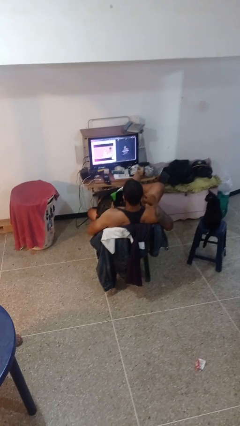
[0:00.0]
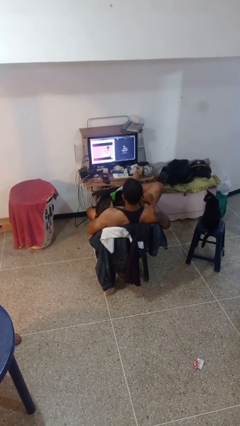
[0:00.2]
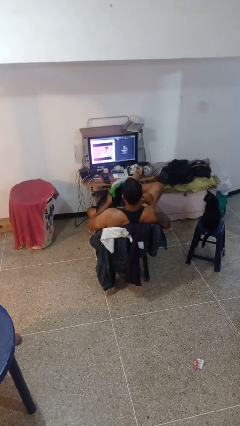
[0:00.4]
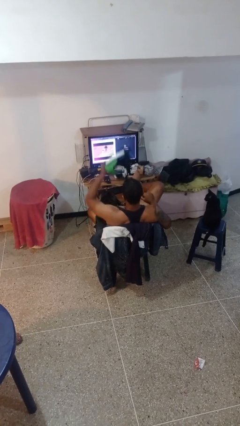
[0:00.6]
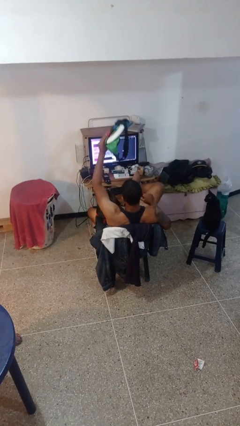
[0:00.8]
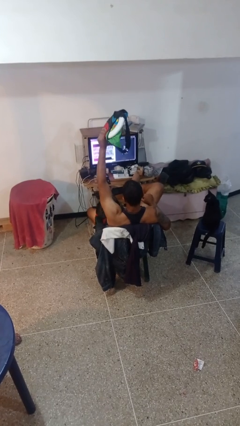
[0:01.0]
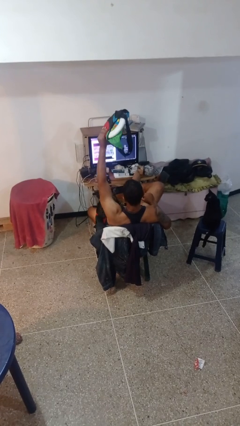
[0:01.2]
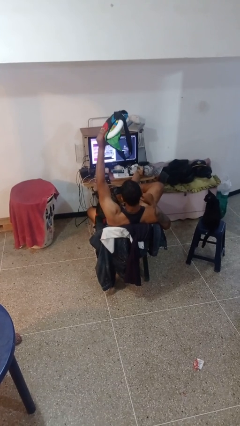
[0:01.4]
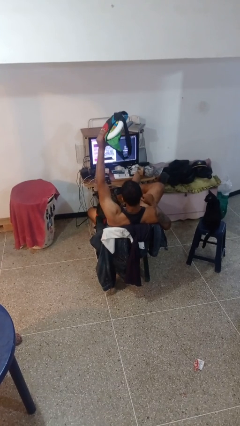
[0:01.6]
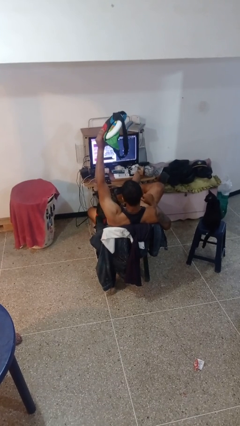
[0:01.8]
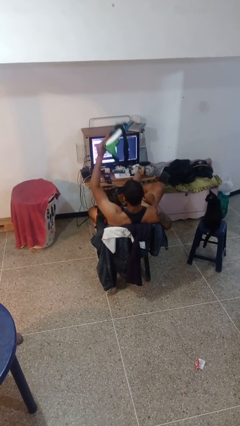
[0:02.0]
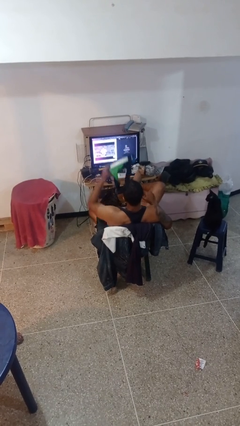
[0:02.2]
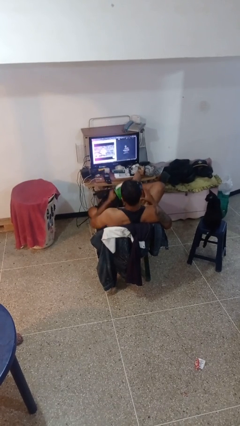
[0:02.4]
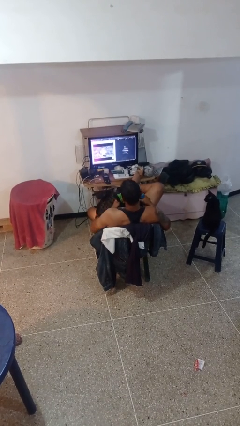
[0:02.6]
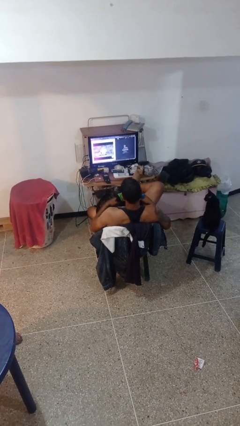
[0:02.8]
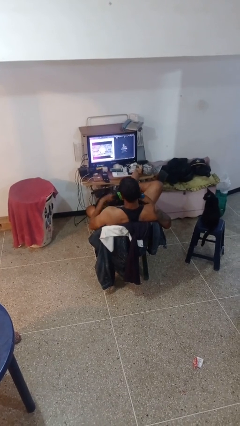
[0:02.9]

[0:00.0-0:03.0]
person holds object above head

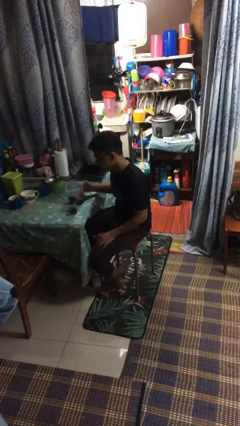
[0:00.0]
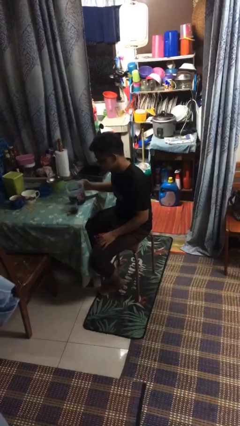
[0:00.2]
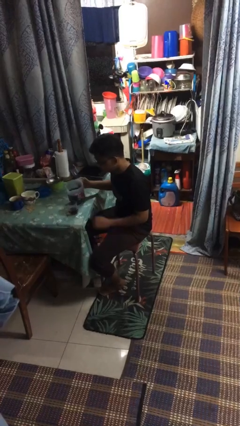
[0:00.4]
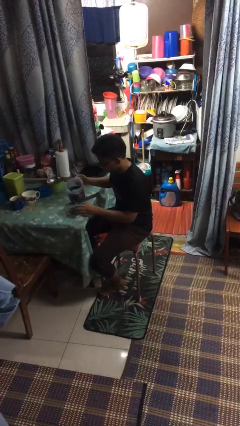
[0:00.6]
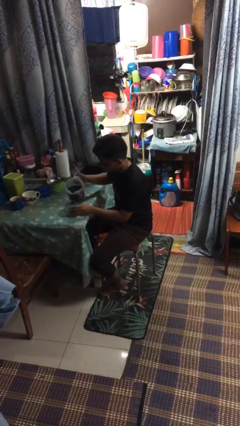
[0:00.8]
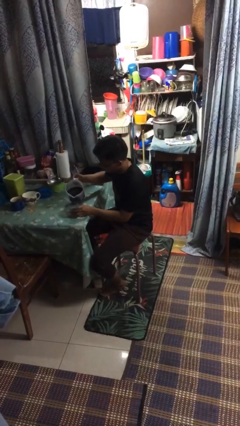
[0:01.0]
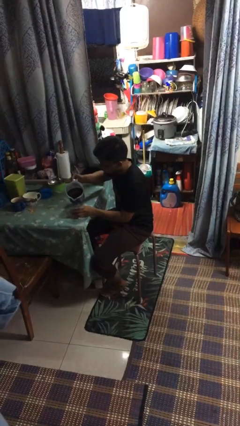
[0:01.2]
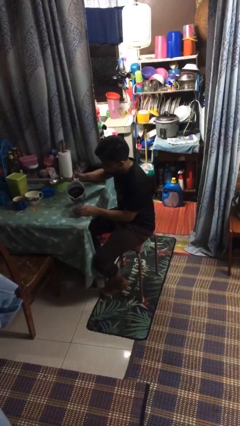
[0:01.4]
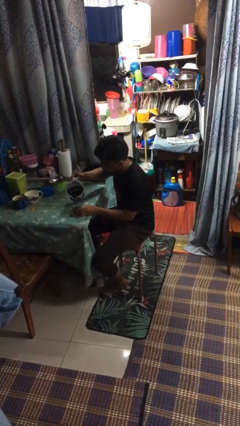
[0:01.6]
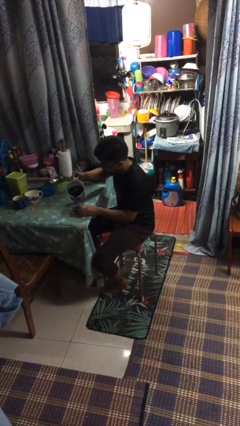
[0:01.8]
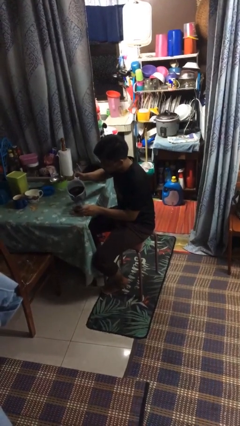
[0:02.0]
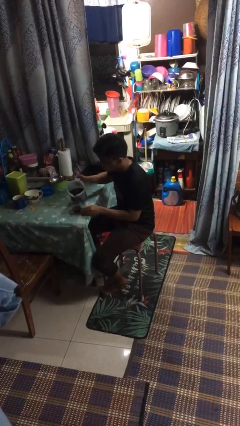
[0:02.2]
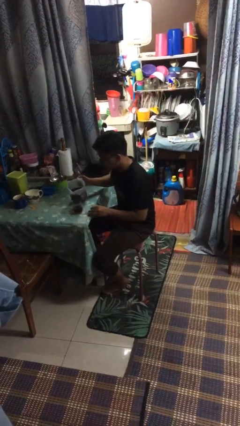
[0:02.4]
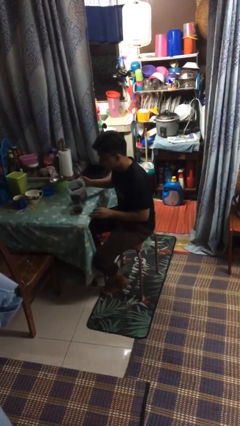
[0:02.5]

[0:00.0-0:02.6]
person pours coffee into mug

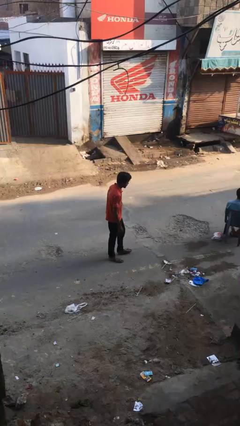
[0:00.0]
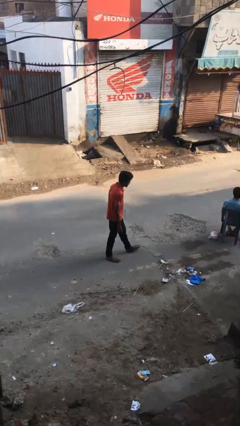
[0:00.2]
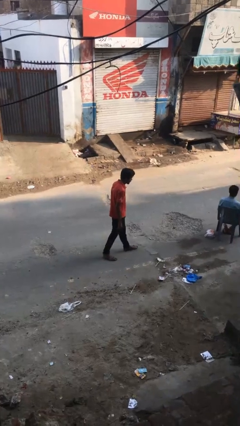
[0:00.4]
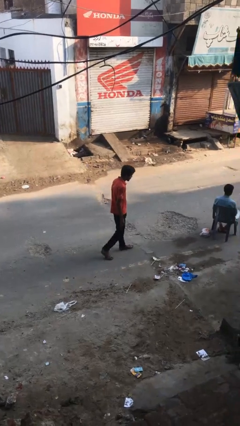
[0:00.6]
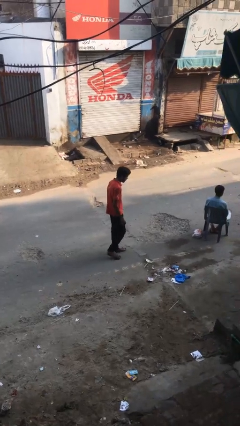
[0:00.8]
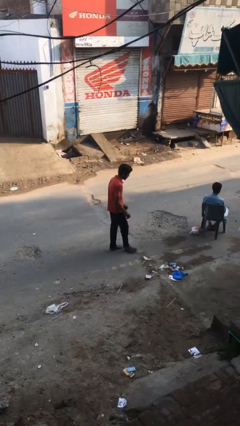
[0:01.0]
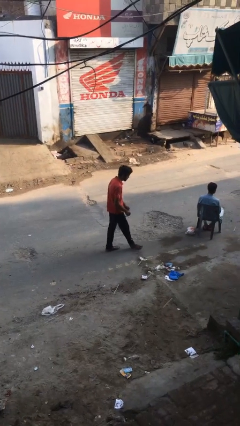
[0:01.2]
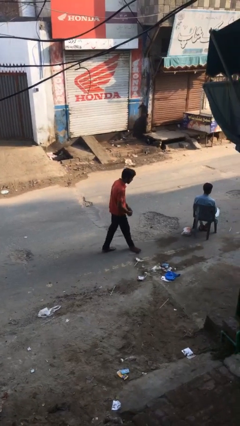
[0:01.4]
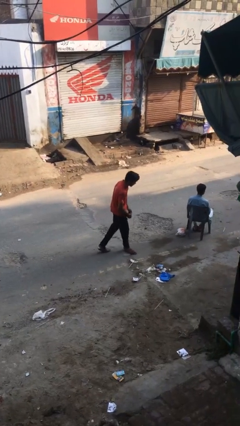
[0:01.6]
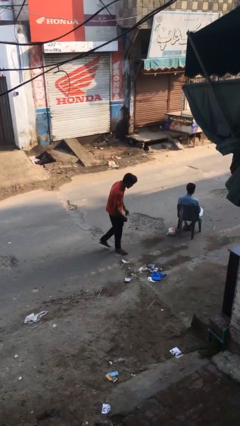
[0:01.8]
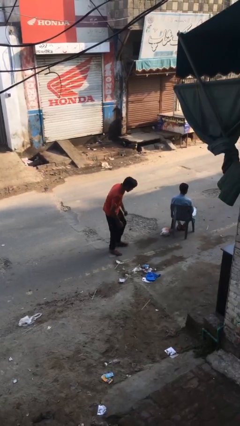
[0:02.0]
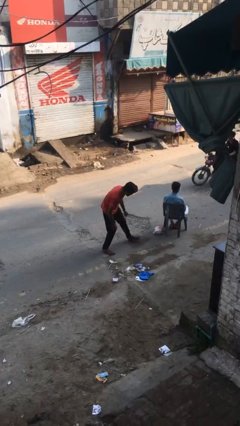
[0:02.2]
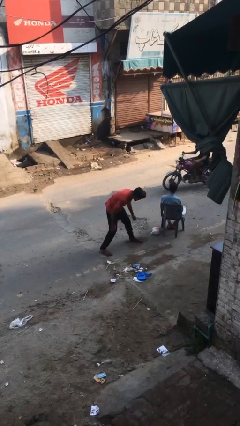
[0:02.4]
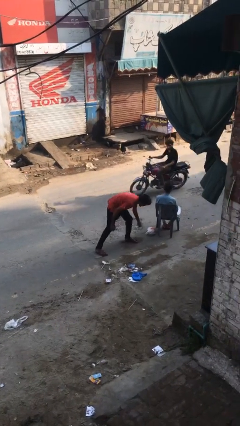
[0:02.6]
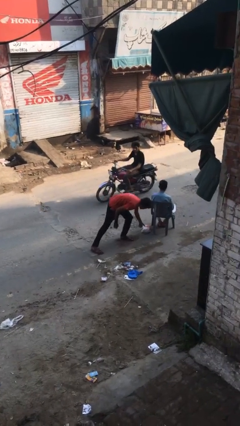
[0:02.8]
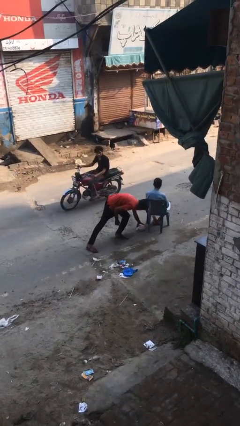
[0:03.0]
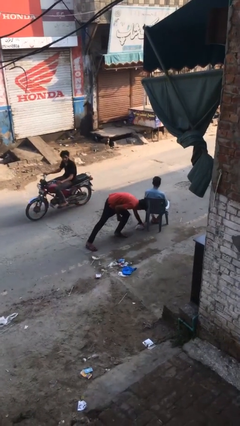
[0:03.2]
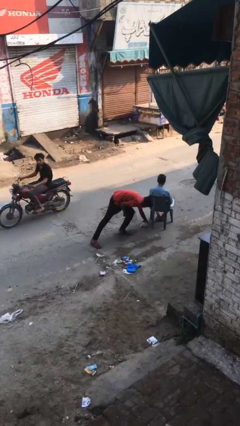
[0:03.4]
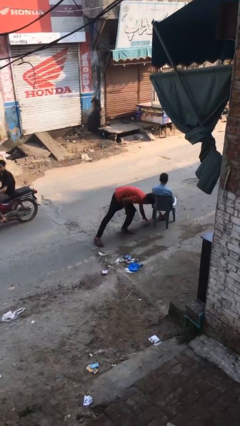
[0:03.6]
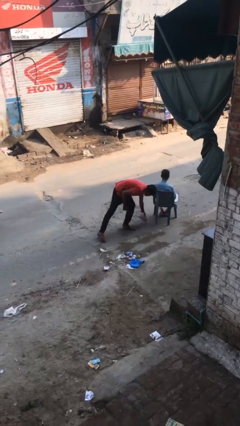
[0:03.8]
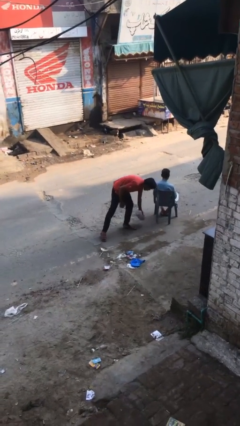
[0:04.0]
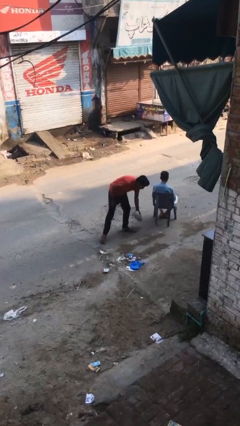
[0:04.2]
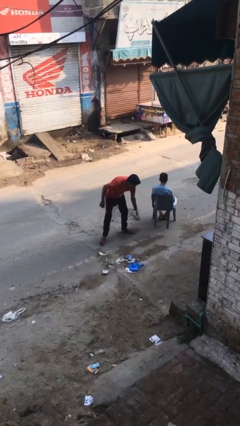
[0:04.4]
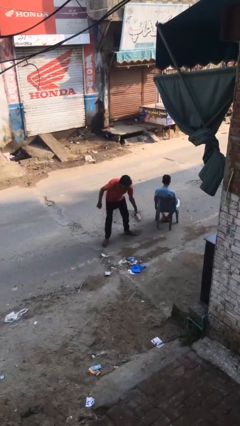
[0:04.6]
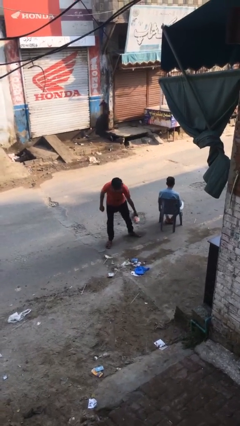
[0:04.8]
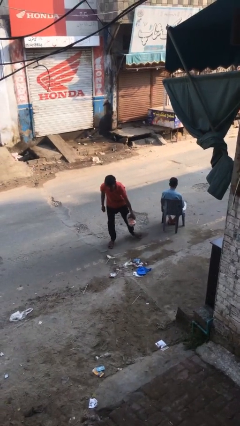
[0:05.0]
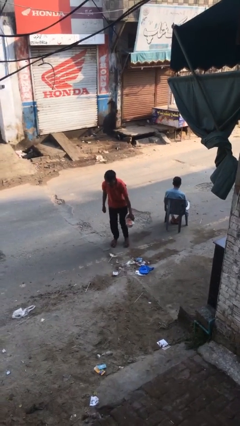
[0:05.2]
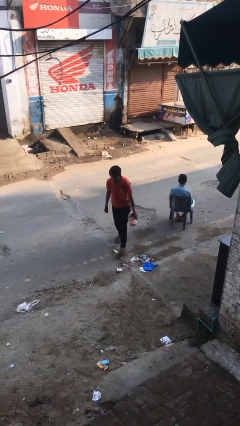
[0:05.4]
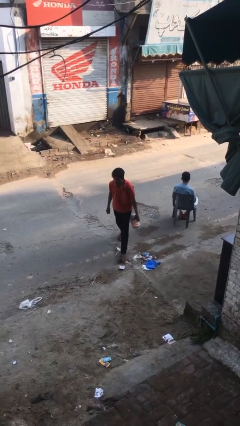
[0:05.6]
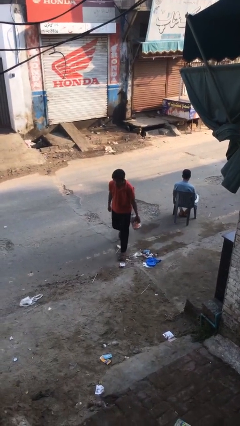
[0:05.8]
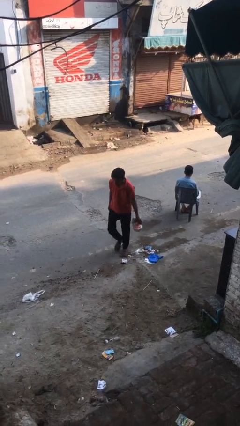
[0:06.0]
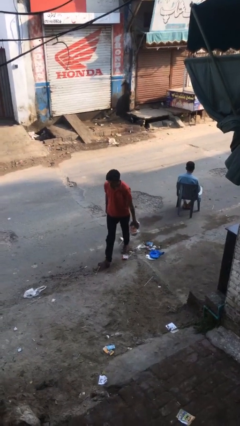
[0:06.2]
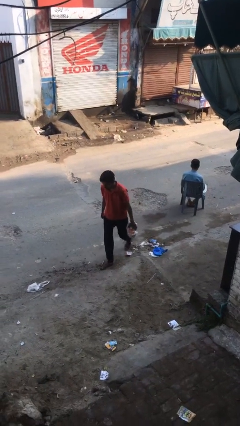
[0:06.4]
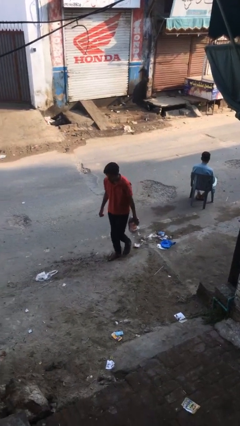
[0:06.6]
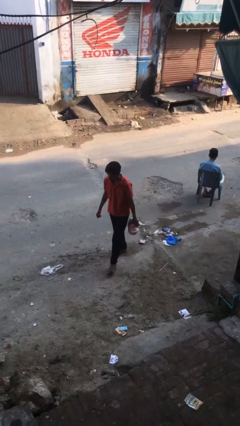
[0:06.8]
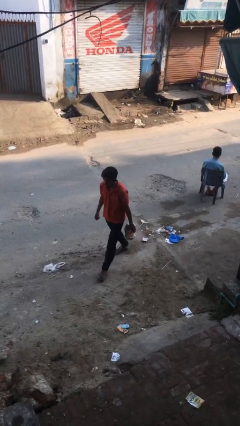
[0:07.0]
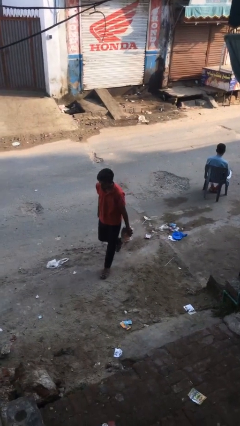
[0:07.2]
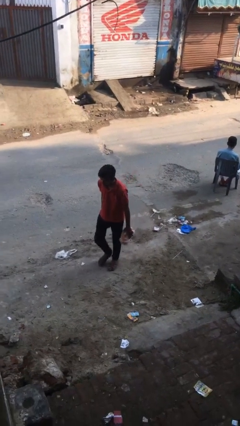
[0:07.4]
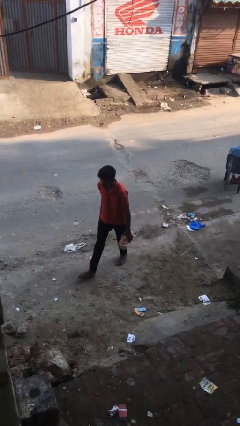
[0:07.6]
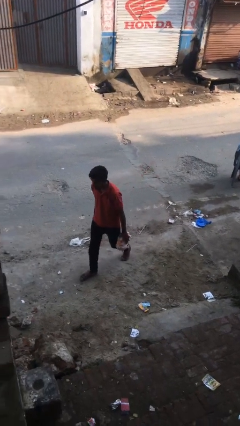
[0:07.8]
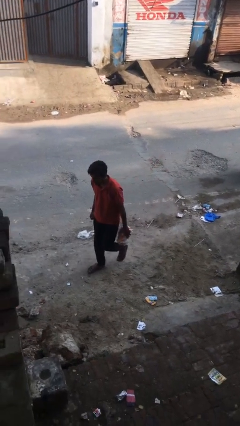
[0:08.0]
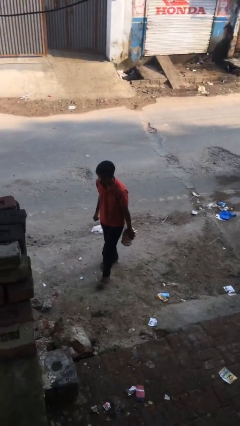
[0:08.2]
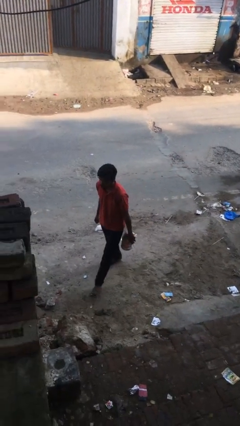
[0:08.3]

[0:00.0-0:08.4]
person steals object from person

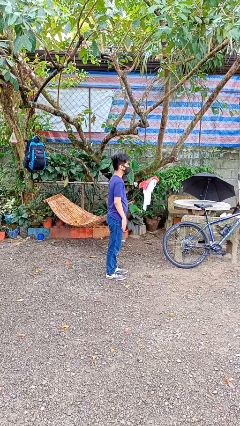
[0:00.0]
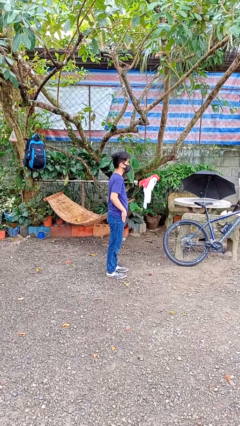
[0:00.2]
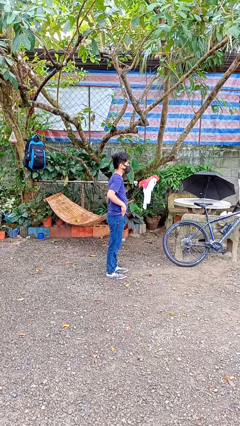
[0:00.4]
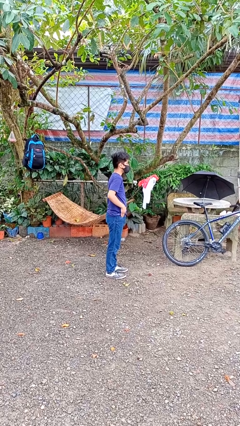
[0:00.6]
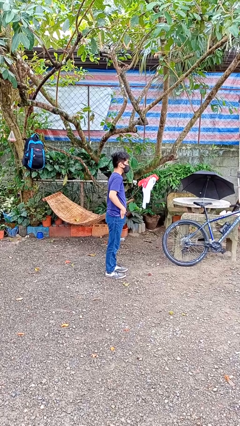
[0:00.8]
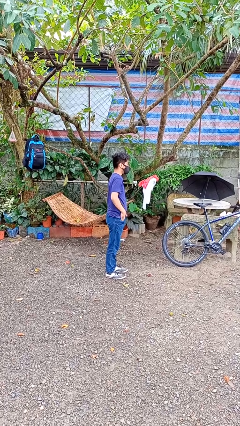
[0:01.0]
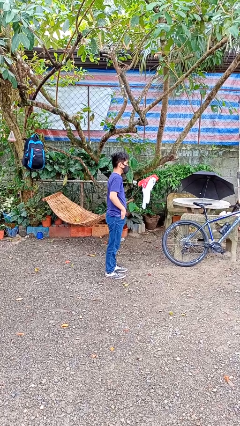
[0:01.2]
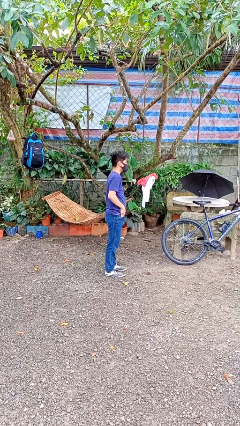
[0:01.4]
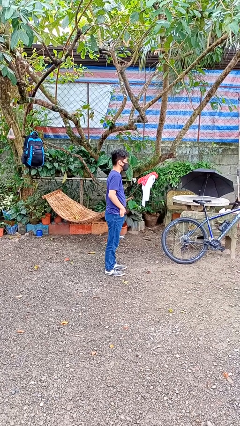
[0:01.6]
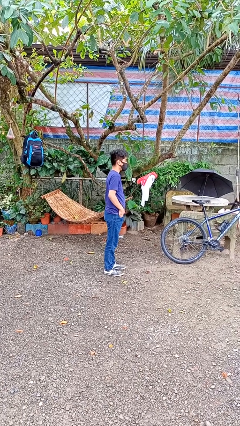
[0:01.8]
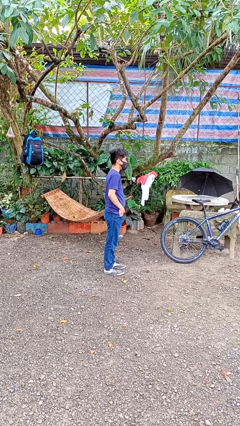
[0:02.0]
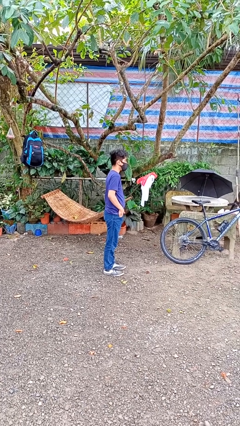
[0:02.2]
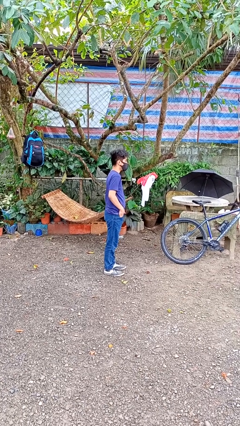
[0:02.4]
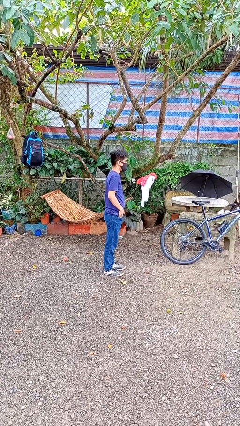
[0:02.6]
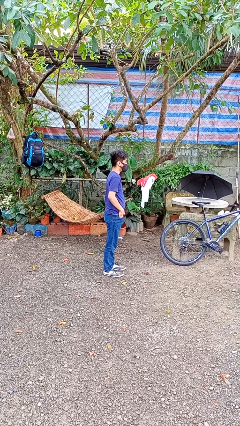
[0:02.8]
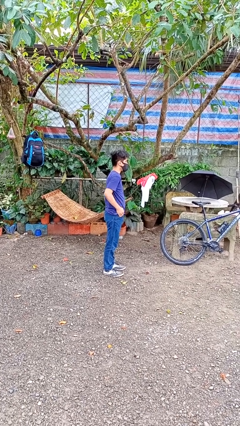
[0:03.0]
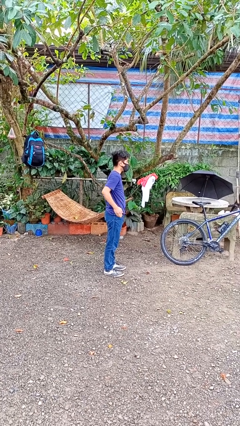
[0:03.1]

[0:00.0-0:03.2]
person puts hands in back pockets

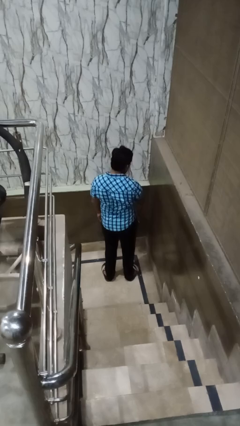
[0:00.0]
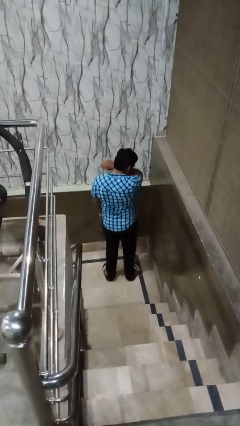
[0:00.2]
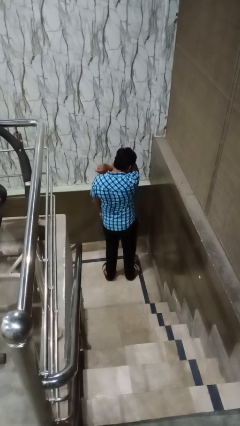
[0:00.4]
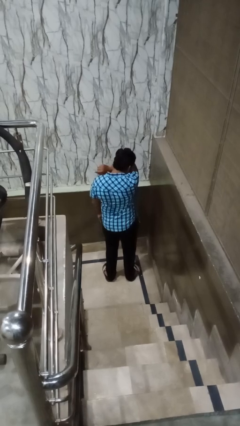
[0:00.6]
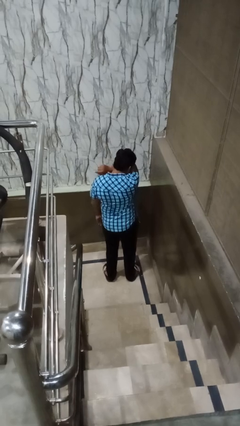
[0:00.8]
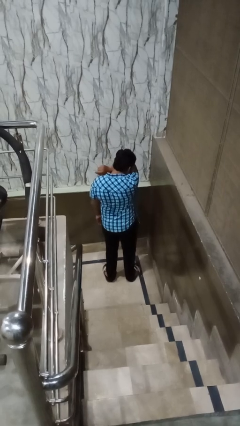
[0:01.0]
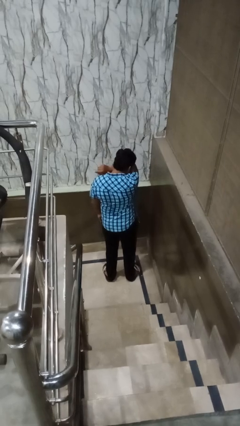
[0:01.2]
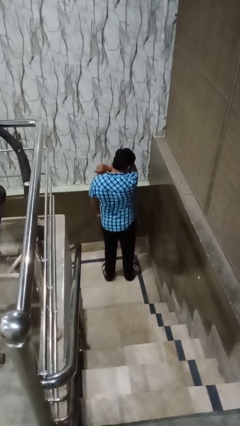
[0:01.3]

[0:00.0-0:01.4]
person sneezes into arm
